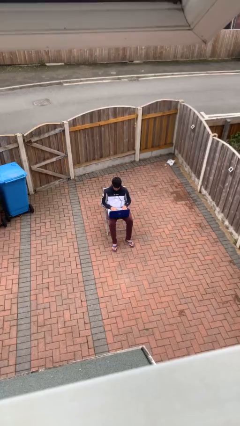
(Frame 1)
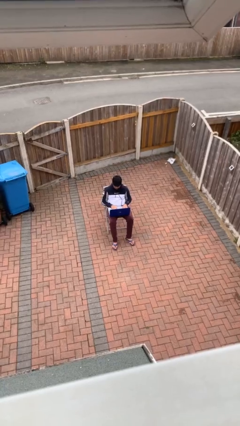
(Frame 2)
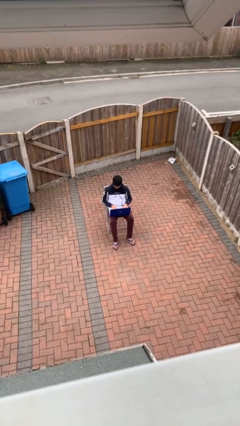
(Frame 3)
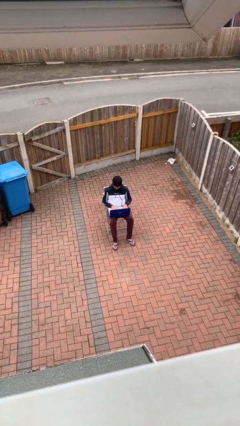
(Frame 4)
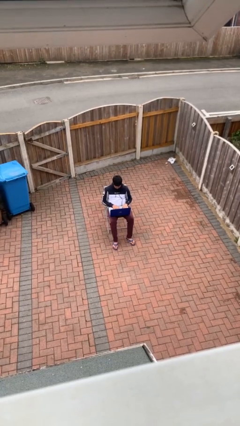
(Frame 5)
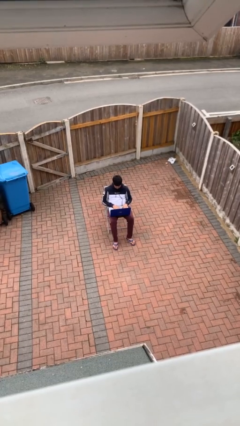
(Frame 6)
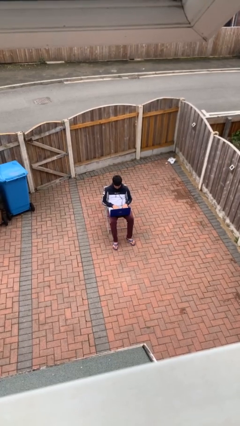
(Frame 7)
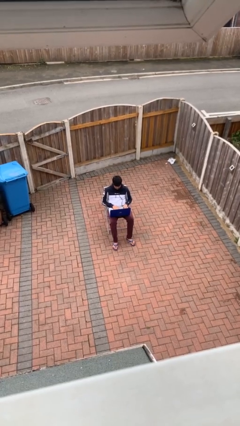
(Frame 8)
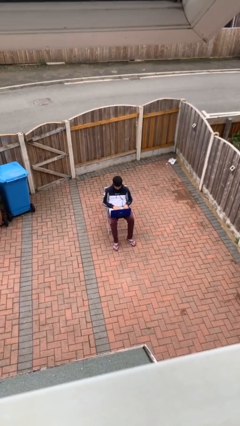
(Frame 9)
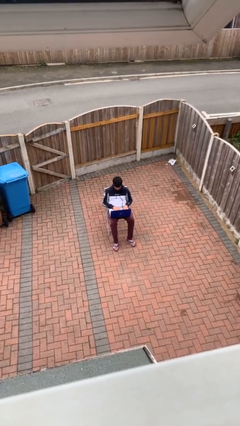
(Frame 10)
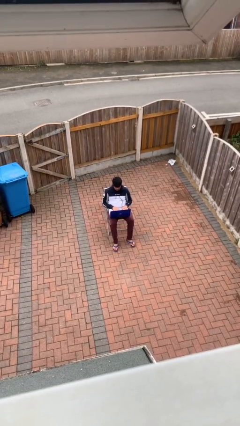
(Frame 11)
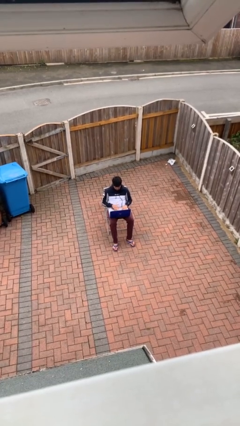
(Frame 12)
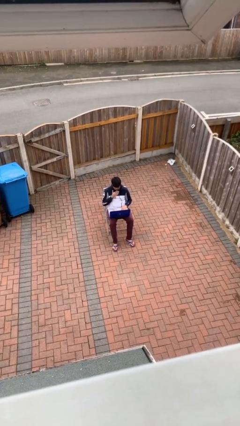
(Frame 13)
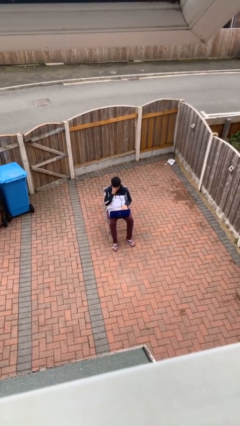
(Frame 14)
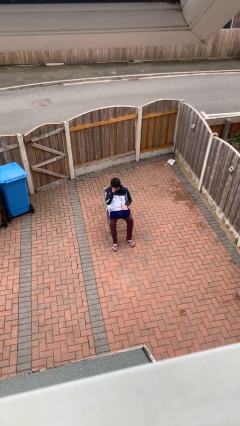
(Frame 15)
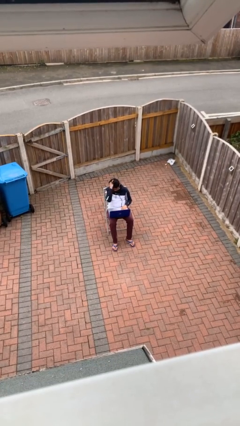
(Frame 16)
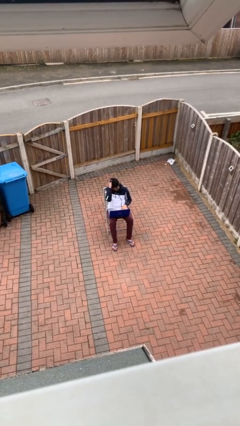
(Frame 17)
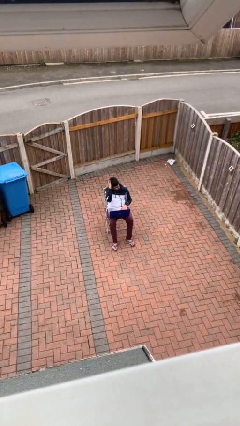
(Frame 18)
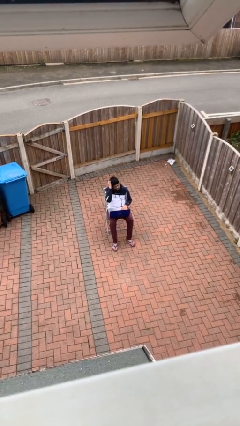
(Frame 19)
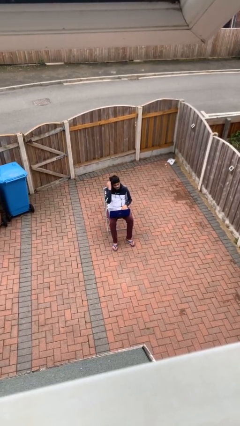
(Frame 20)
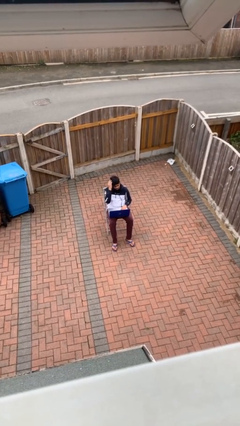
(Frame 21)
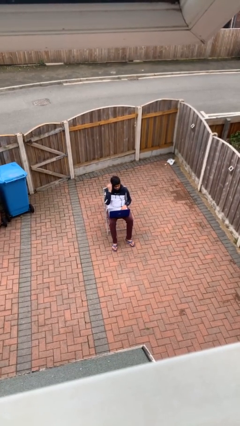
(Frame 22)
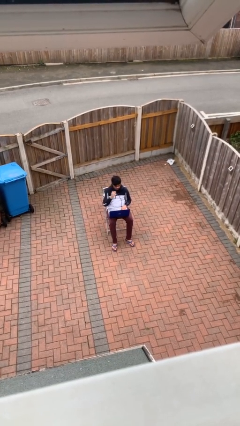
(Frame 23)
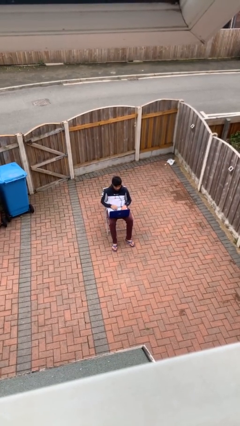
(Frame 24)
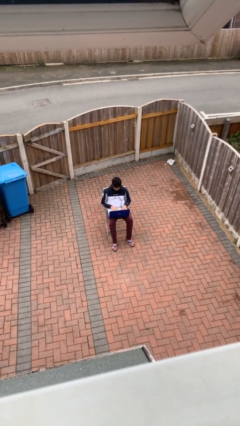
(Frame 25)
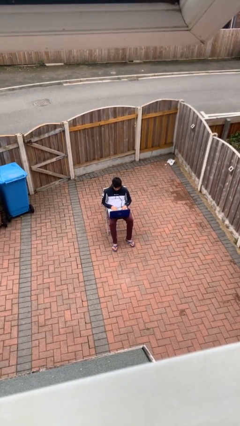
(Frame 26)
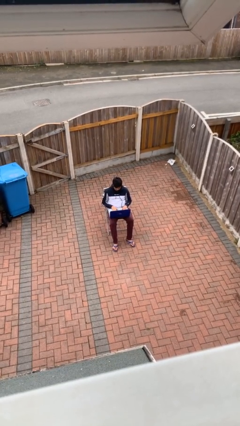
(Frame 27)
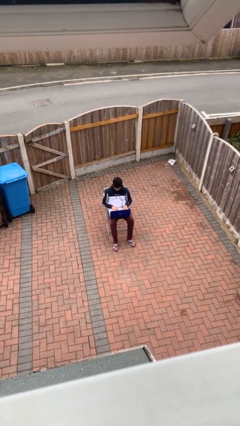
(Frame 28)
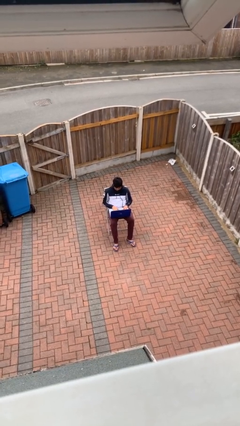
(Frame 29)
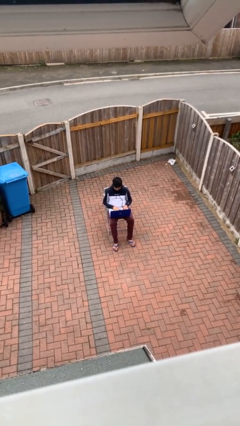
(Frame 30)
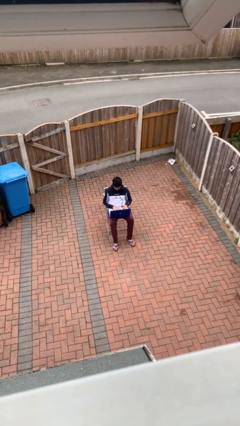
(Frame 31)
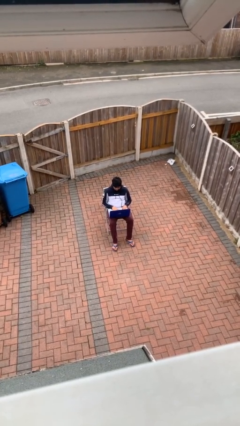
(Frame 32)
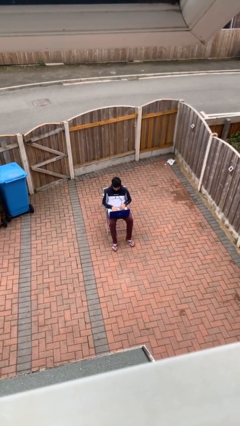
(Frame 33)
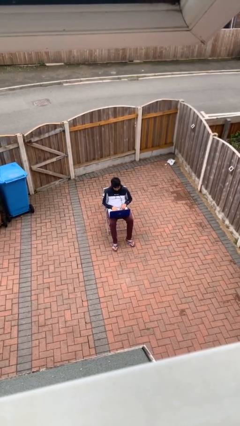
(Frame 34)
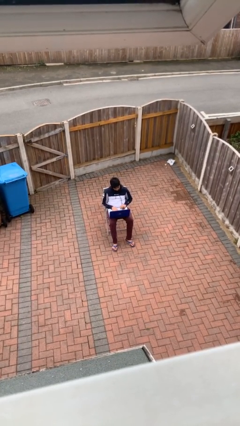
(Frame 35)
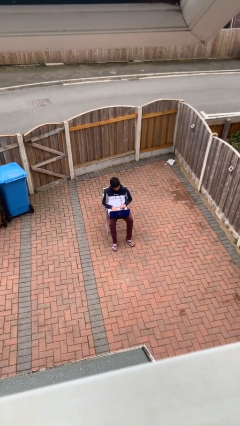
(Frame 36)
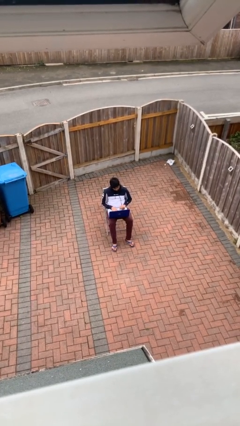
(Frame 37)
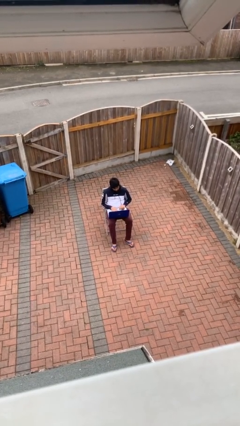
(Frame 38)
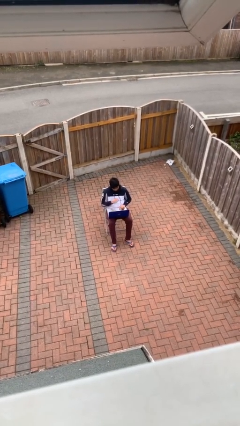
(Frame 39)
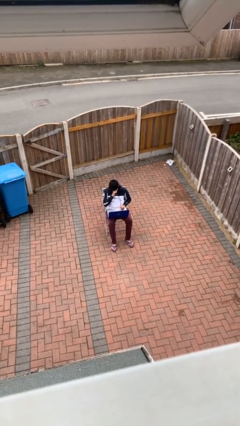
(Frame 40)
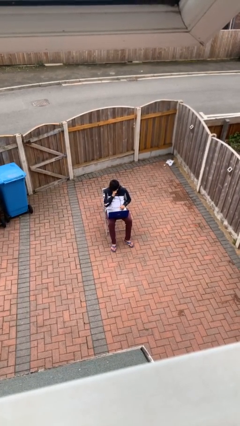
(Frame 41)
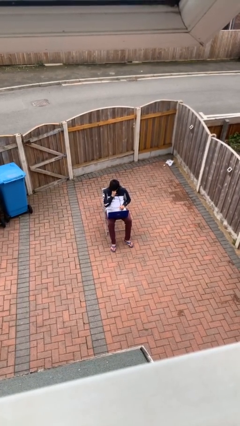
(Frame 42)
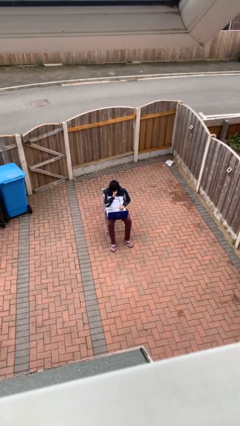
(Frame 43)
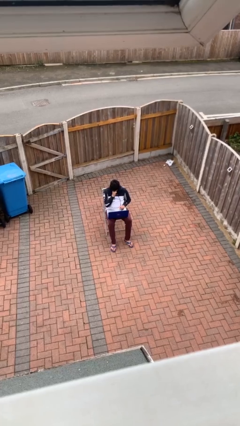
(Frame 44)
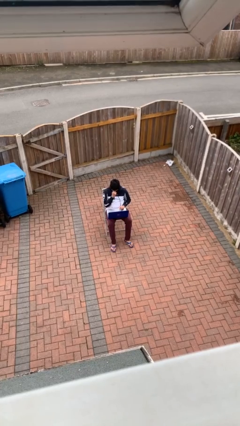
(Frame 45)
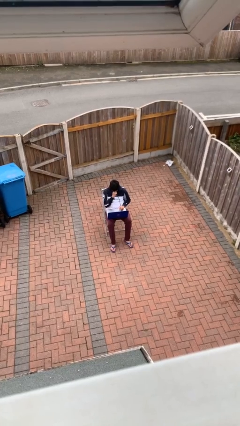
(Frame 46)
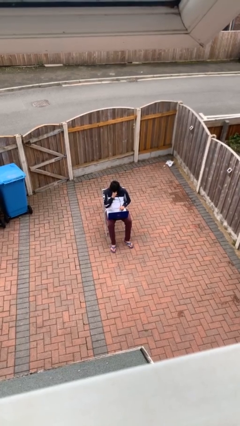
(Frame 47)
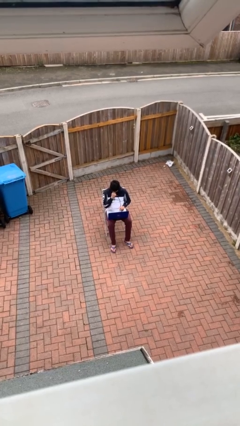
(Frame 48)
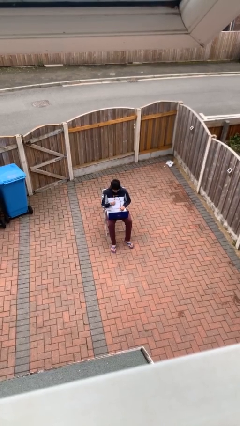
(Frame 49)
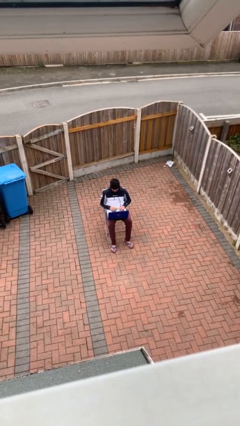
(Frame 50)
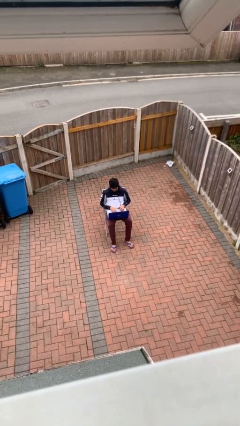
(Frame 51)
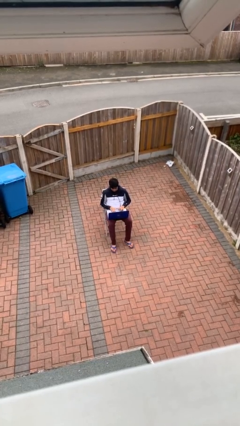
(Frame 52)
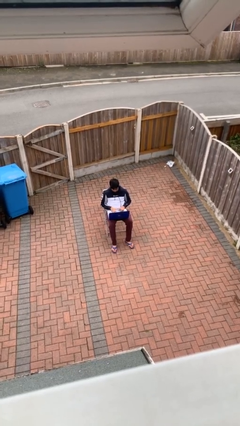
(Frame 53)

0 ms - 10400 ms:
person interacts with laptop

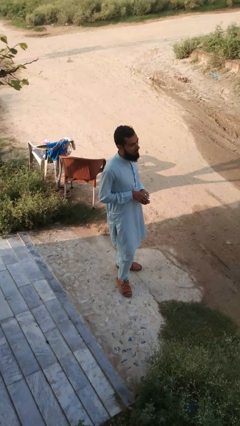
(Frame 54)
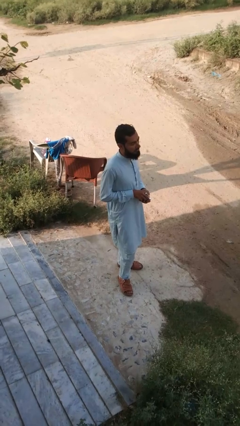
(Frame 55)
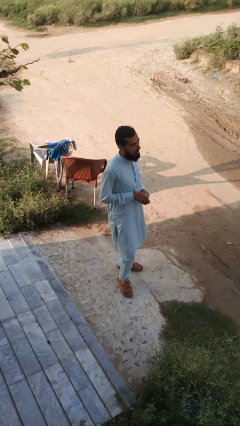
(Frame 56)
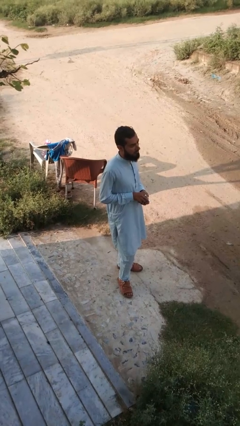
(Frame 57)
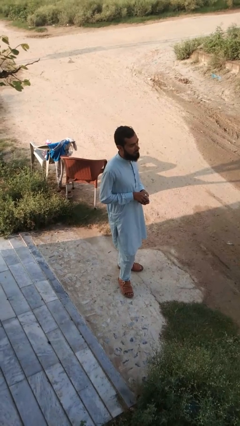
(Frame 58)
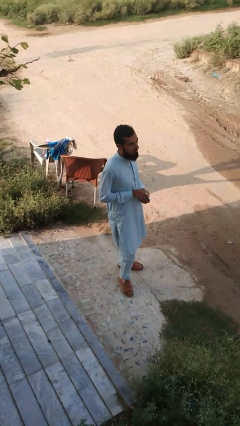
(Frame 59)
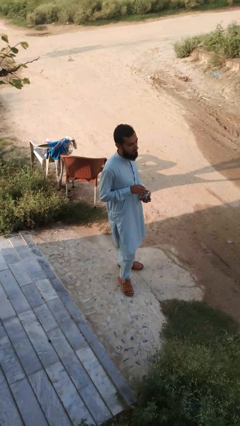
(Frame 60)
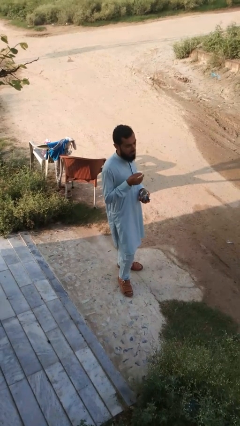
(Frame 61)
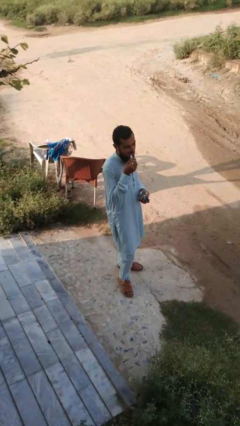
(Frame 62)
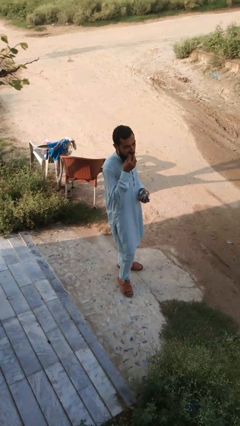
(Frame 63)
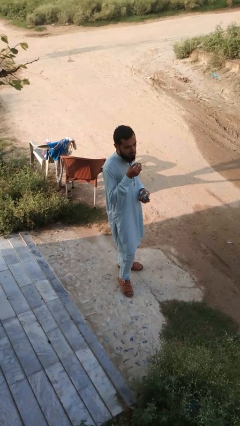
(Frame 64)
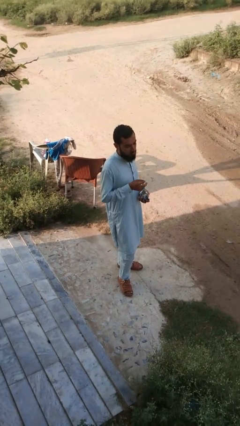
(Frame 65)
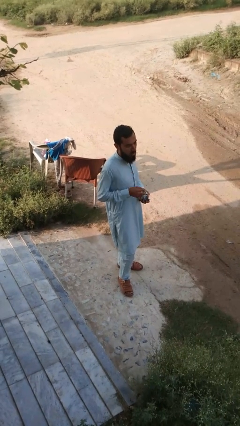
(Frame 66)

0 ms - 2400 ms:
person eats snack from bag

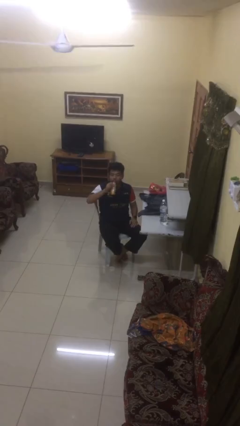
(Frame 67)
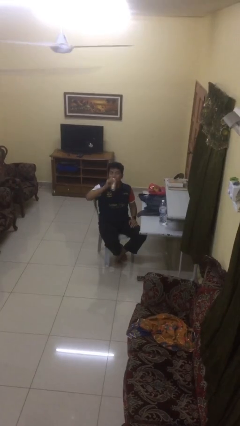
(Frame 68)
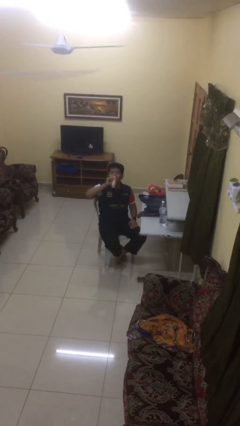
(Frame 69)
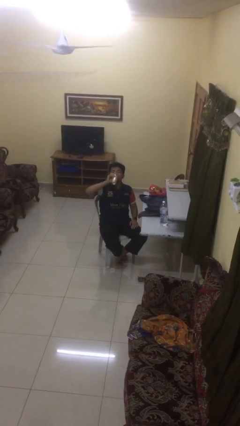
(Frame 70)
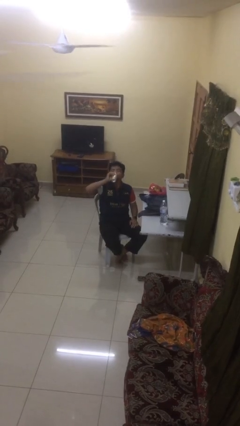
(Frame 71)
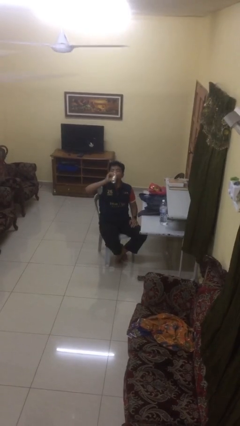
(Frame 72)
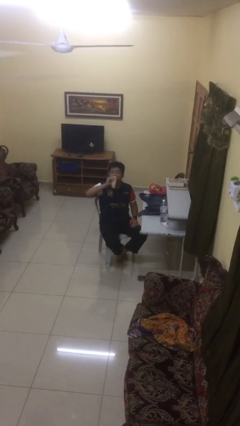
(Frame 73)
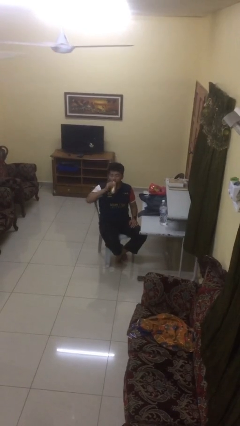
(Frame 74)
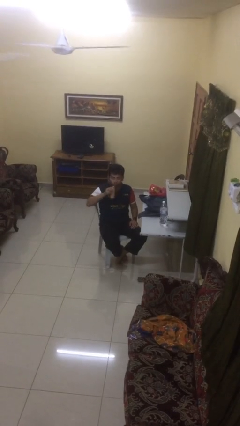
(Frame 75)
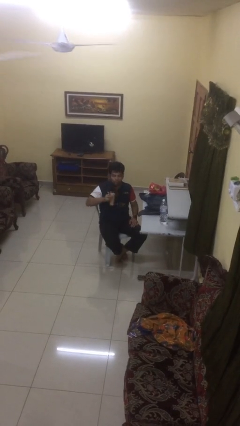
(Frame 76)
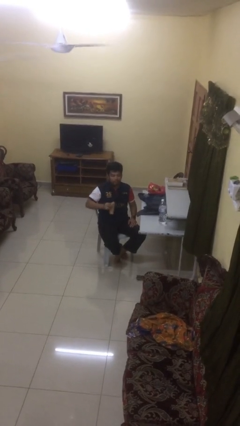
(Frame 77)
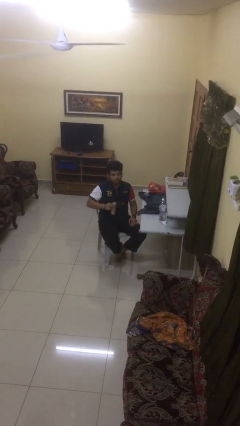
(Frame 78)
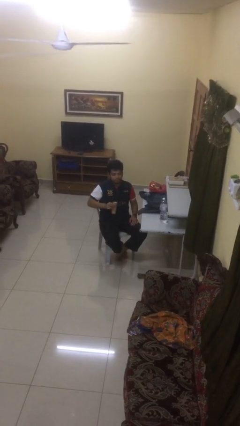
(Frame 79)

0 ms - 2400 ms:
person drinks from beverage can

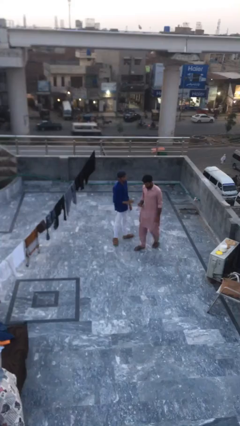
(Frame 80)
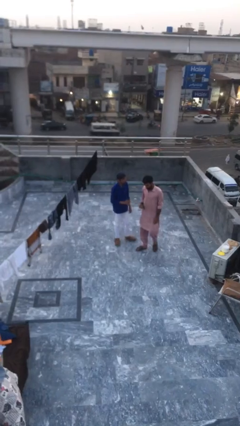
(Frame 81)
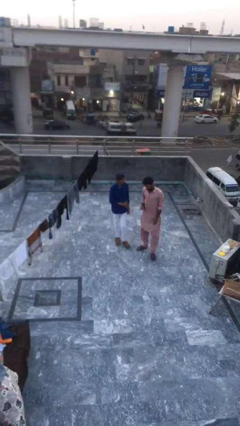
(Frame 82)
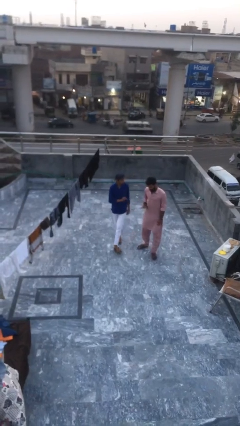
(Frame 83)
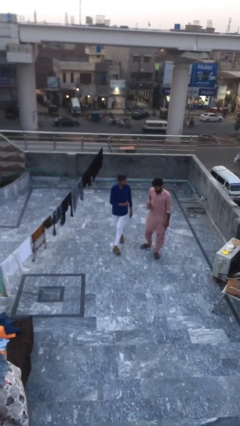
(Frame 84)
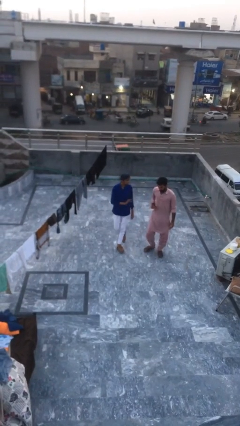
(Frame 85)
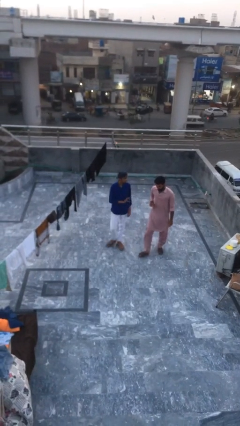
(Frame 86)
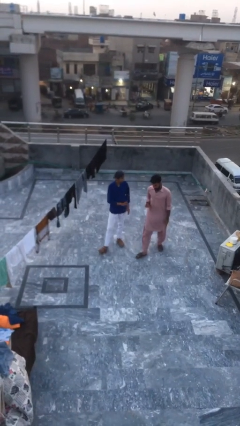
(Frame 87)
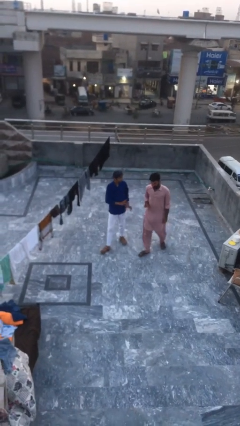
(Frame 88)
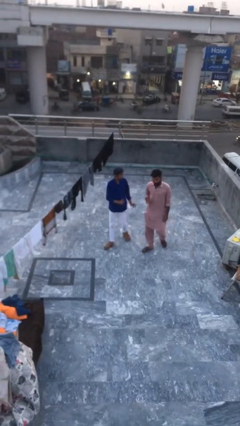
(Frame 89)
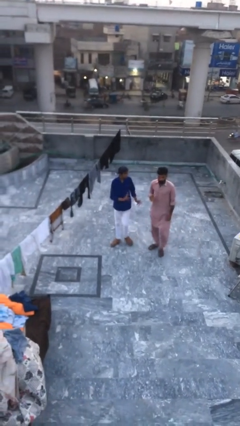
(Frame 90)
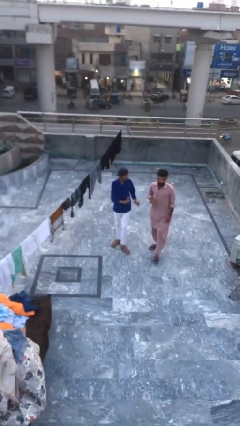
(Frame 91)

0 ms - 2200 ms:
person talks to person

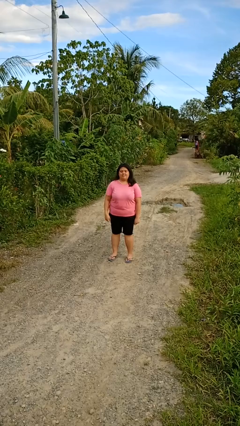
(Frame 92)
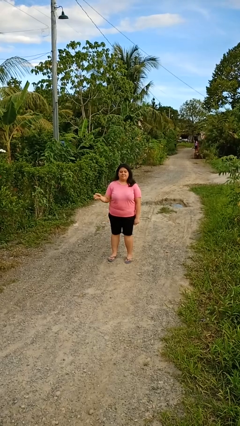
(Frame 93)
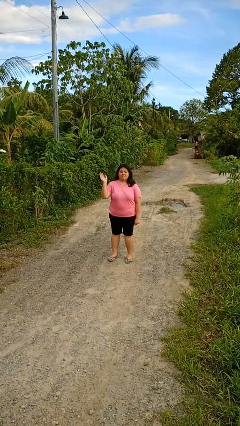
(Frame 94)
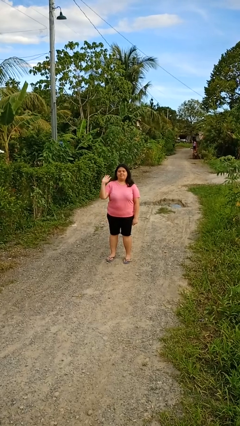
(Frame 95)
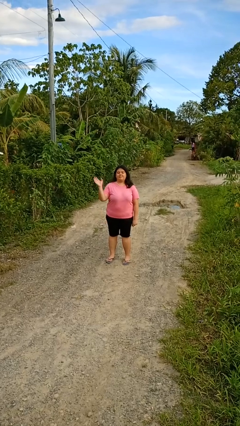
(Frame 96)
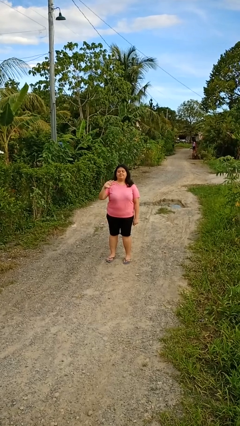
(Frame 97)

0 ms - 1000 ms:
person waves at person
